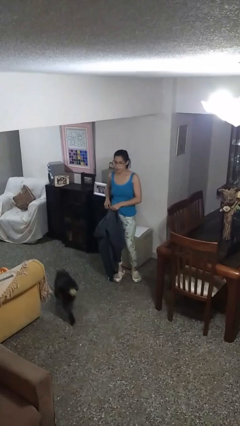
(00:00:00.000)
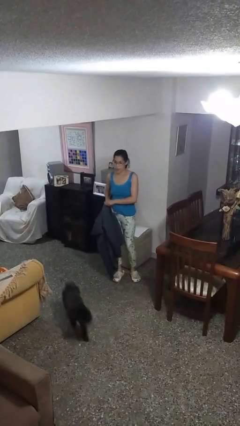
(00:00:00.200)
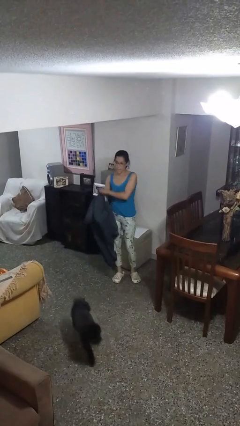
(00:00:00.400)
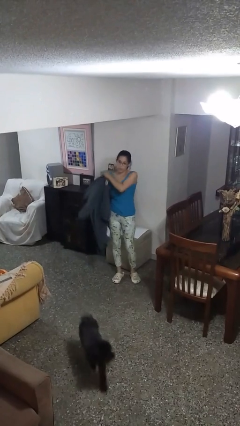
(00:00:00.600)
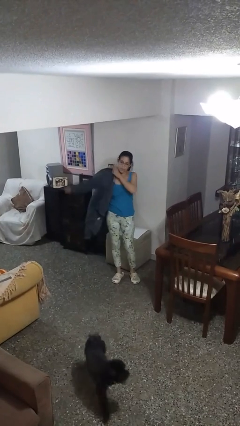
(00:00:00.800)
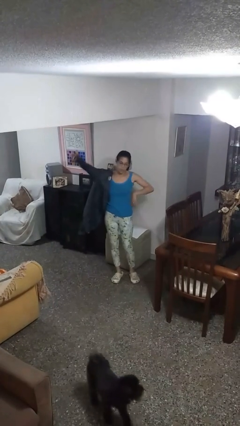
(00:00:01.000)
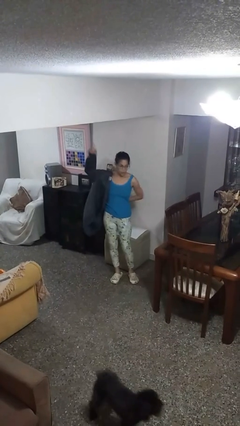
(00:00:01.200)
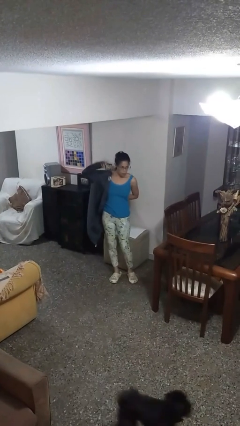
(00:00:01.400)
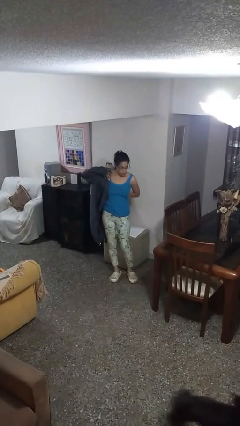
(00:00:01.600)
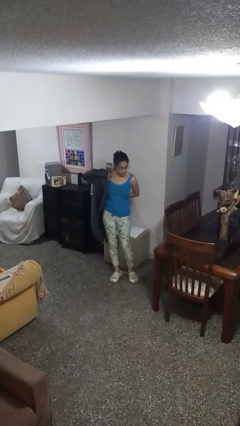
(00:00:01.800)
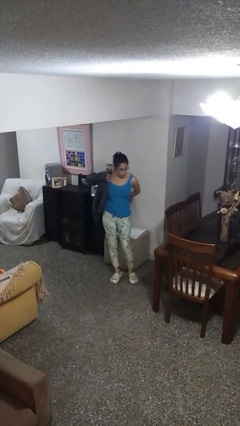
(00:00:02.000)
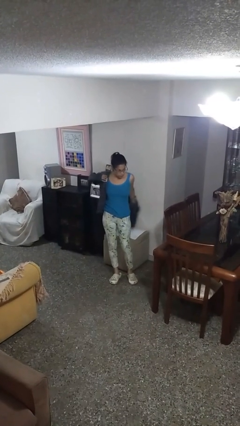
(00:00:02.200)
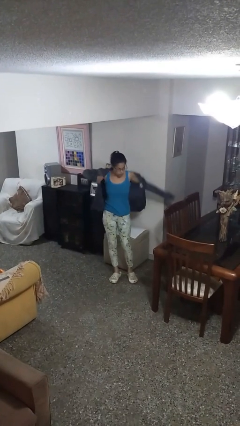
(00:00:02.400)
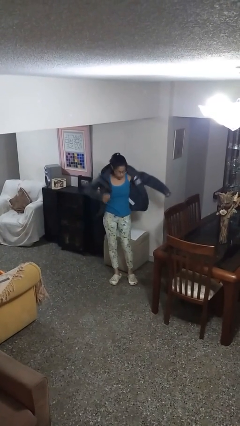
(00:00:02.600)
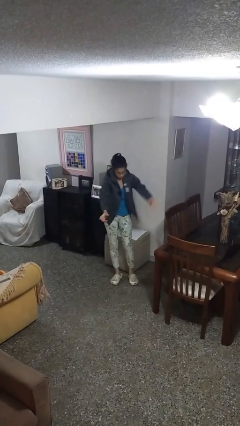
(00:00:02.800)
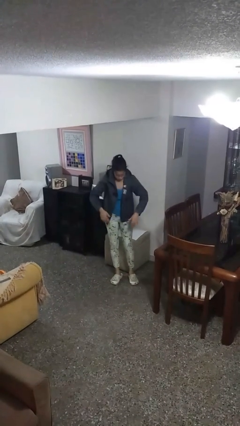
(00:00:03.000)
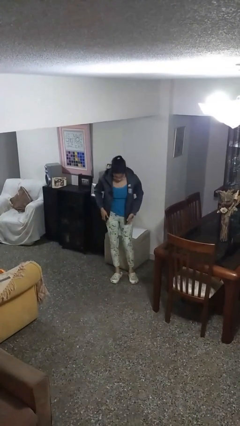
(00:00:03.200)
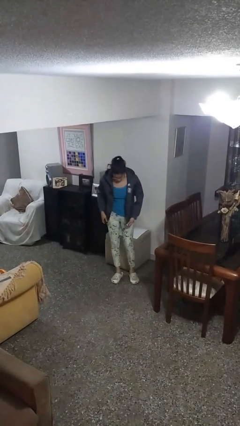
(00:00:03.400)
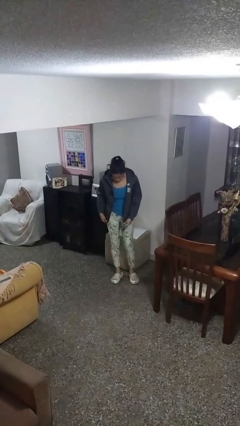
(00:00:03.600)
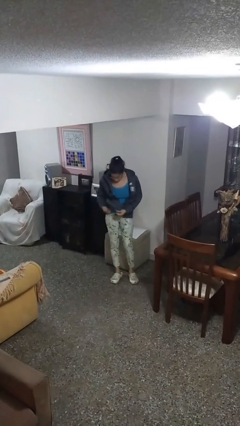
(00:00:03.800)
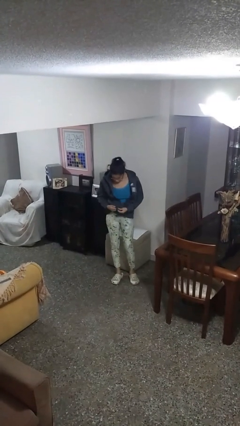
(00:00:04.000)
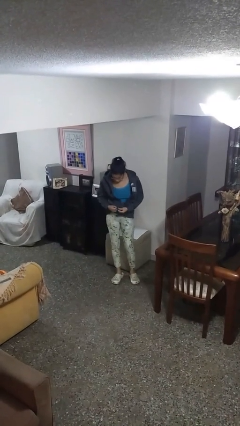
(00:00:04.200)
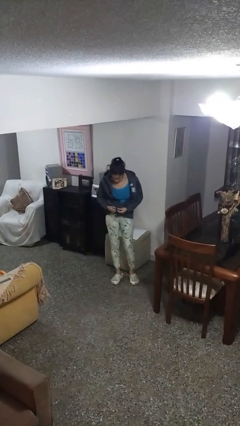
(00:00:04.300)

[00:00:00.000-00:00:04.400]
person puts on jacket

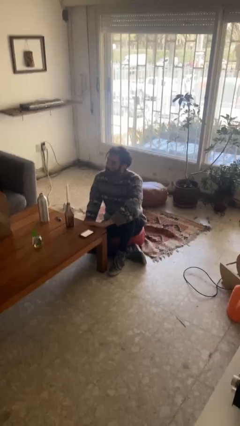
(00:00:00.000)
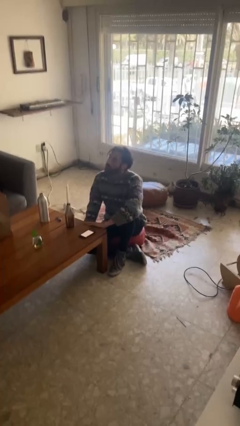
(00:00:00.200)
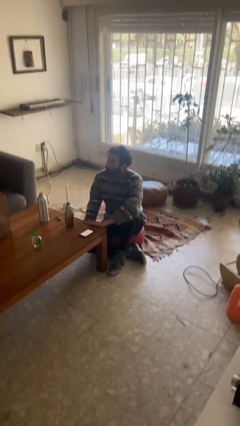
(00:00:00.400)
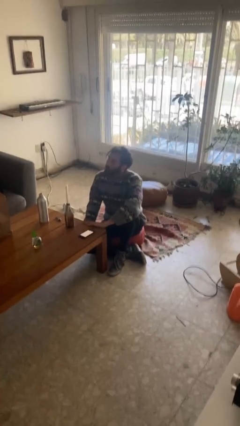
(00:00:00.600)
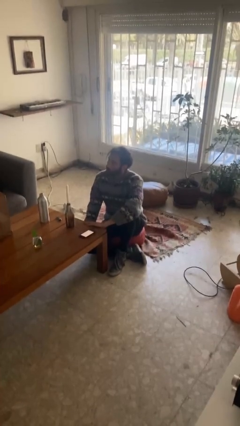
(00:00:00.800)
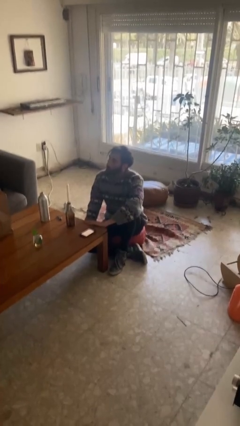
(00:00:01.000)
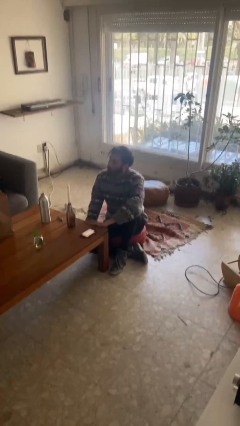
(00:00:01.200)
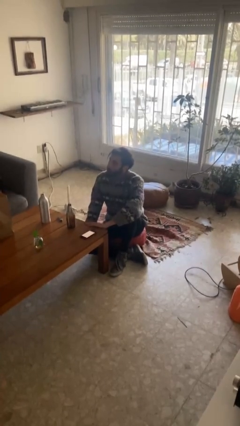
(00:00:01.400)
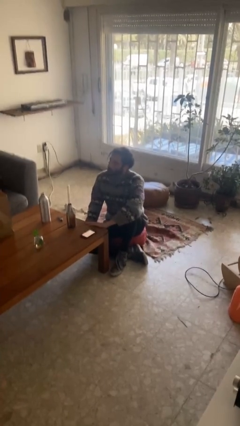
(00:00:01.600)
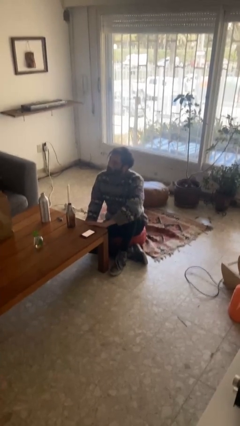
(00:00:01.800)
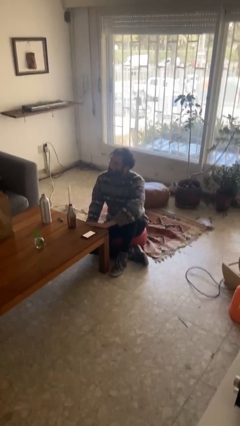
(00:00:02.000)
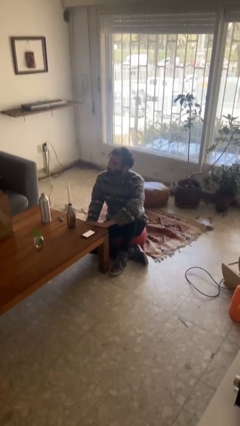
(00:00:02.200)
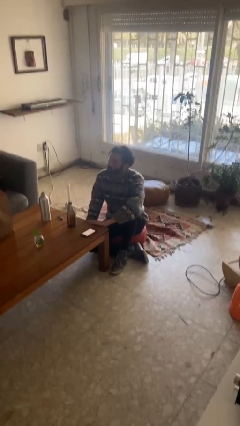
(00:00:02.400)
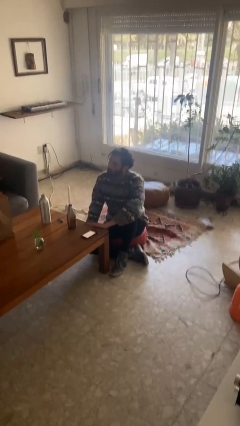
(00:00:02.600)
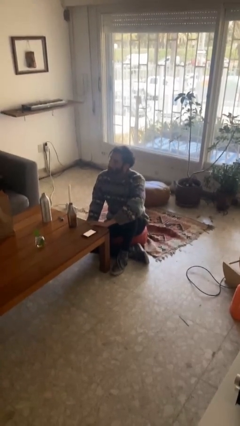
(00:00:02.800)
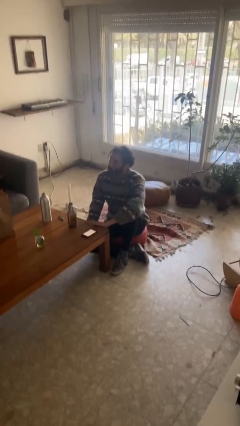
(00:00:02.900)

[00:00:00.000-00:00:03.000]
person nods head

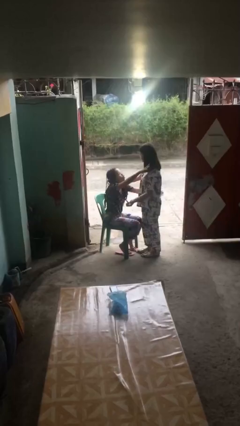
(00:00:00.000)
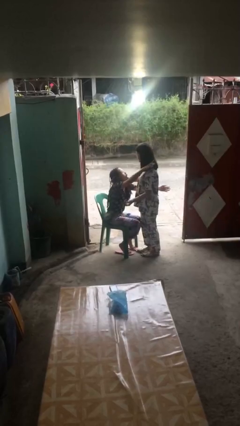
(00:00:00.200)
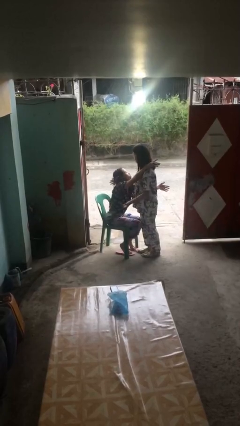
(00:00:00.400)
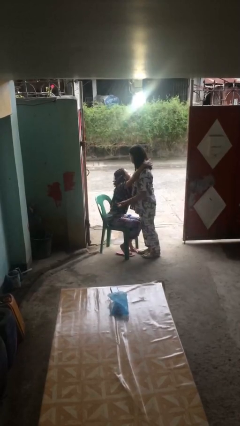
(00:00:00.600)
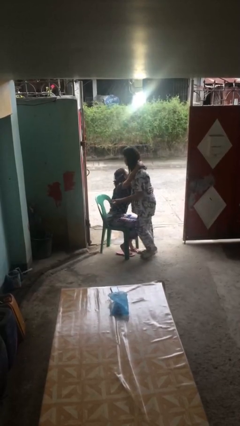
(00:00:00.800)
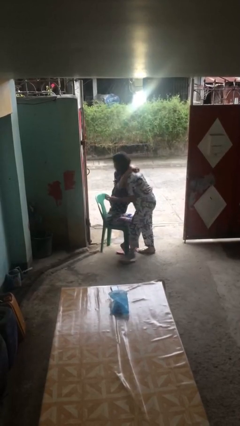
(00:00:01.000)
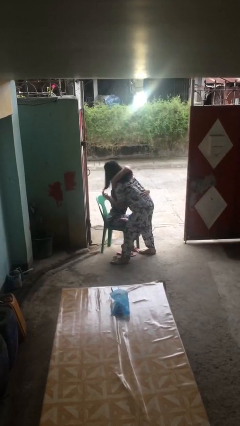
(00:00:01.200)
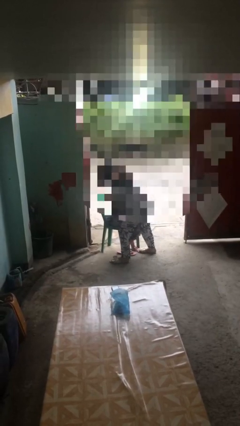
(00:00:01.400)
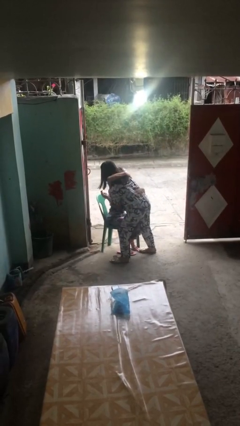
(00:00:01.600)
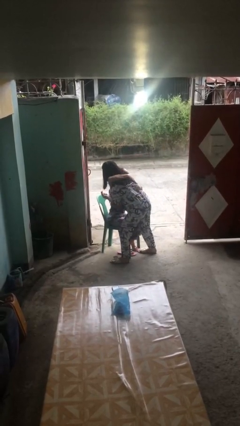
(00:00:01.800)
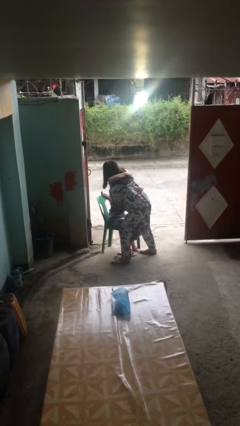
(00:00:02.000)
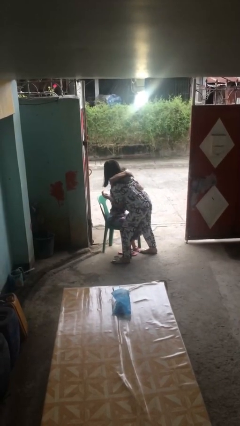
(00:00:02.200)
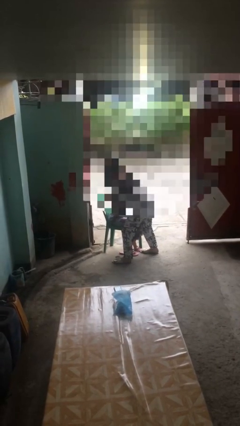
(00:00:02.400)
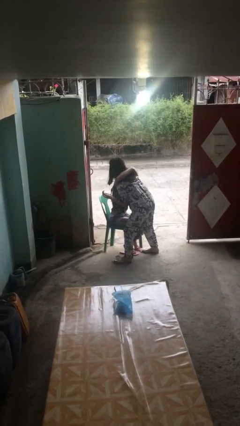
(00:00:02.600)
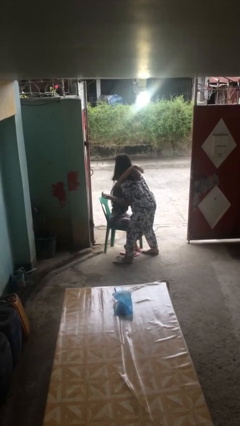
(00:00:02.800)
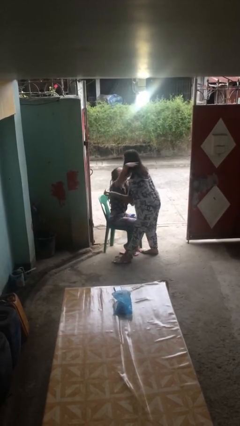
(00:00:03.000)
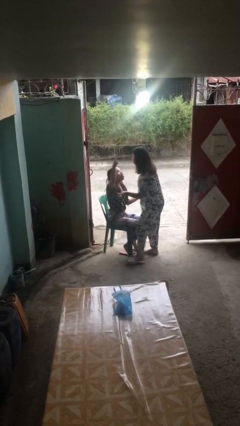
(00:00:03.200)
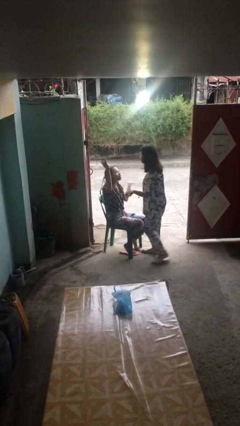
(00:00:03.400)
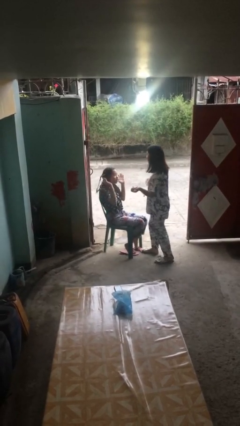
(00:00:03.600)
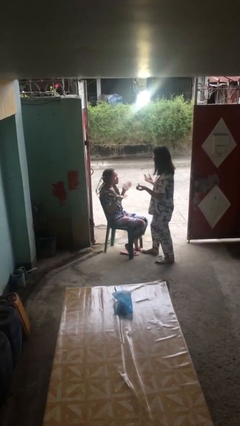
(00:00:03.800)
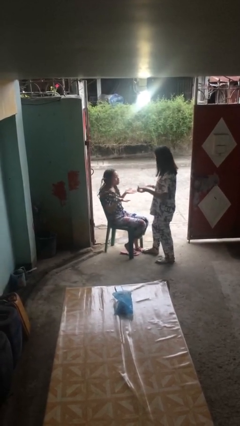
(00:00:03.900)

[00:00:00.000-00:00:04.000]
person embraces person

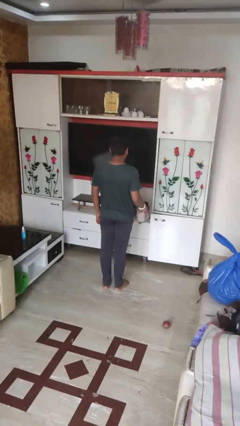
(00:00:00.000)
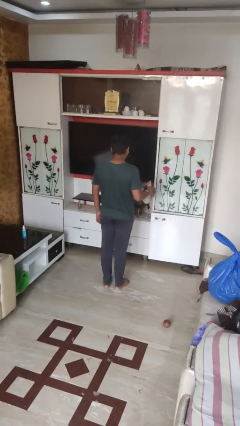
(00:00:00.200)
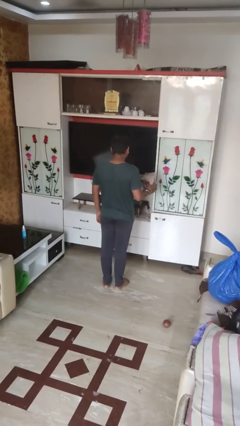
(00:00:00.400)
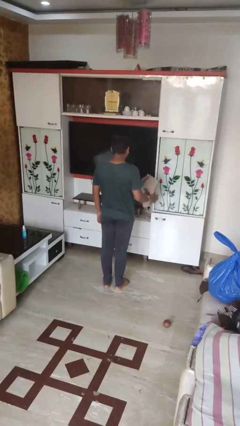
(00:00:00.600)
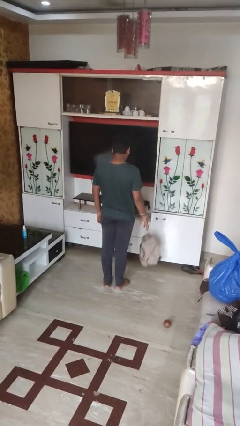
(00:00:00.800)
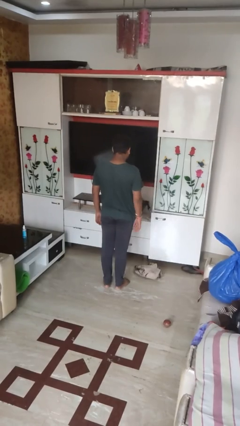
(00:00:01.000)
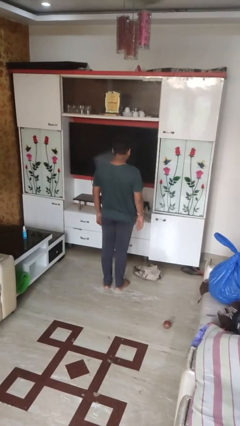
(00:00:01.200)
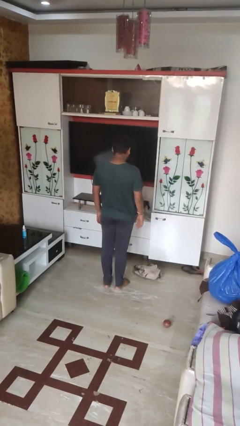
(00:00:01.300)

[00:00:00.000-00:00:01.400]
person throws object to ground

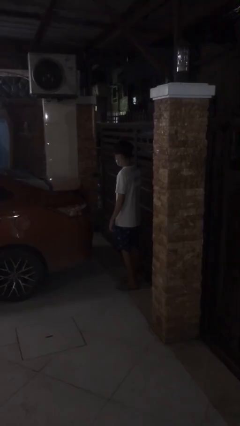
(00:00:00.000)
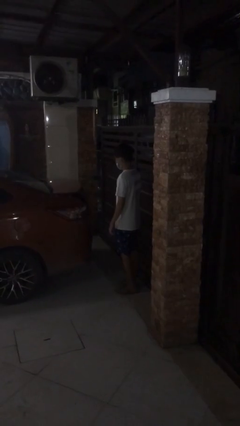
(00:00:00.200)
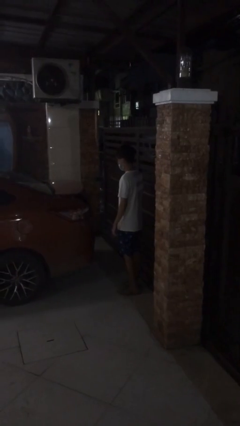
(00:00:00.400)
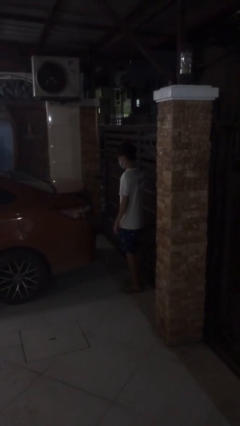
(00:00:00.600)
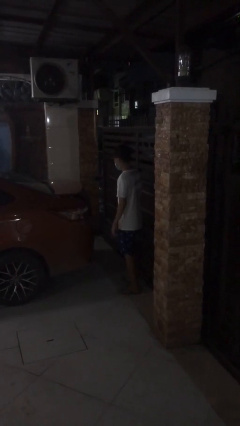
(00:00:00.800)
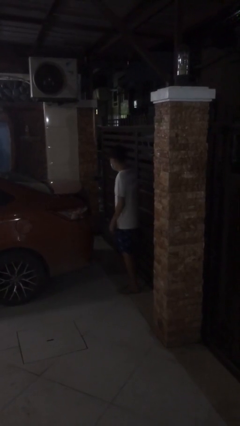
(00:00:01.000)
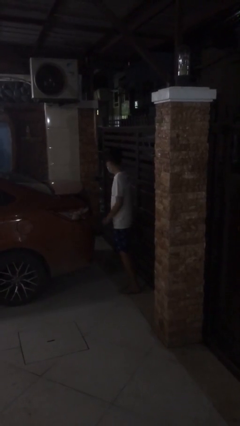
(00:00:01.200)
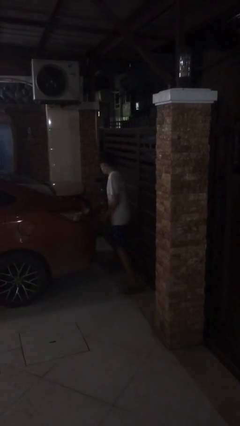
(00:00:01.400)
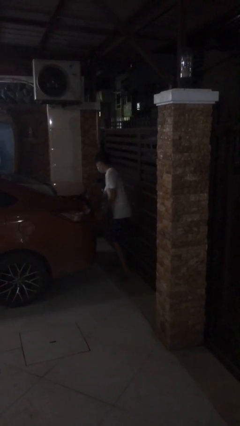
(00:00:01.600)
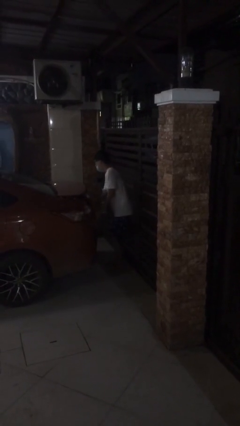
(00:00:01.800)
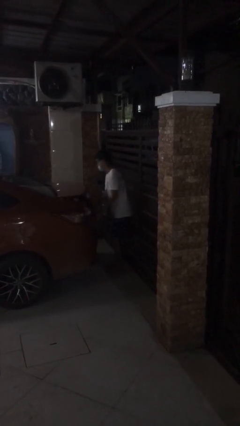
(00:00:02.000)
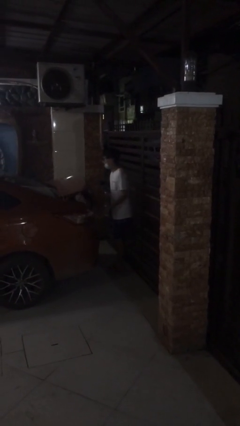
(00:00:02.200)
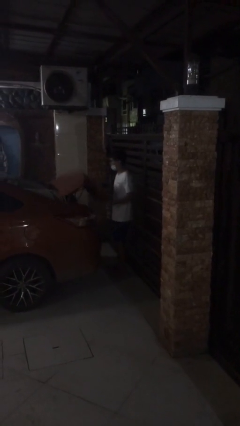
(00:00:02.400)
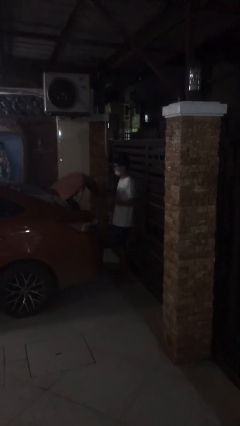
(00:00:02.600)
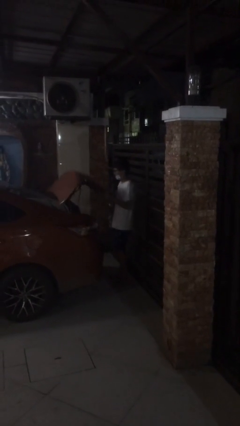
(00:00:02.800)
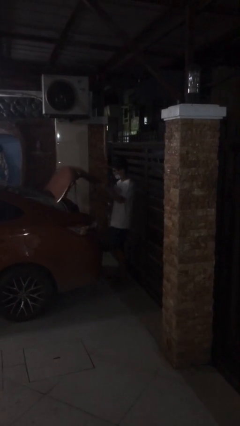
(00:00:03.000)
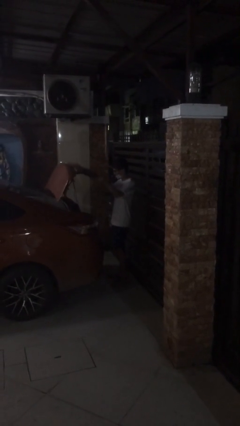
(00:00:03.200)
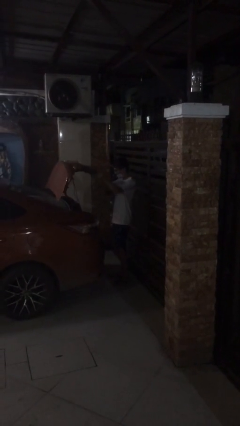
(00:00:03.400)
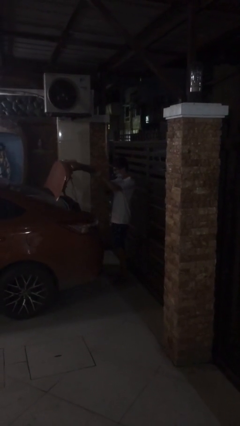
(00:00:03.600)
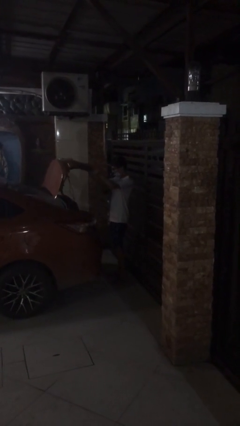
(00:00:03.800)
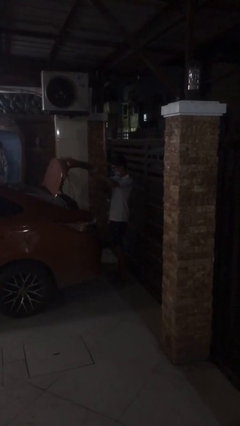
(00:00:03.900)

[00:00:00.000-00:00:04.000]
person opens car trunk

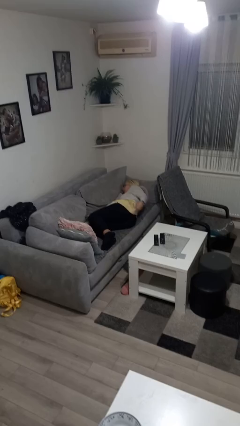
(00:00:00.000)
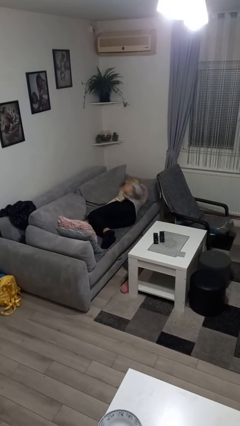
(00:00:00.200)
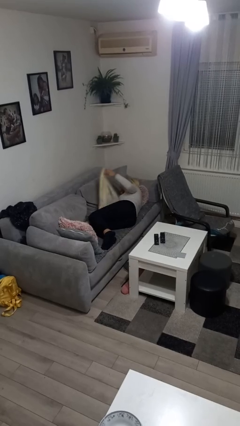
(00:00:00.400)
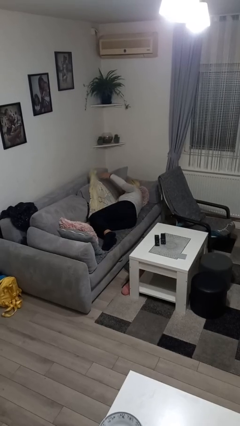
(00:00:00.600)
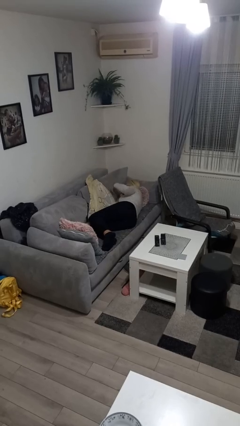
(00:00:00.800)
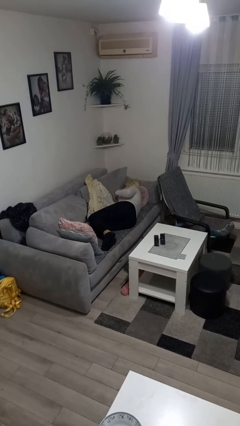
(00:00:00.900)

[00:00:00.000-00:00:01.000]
person uncovers with blanket
